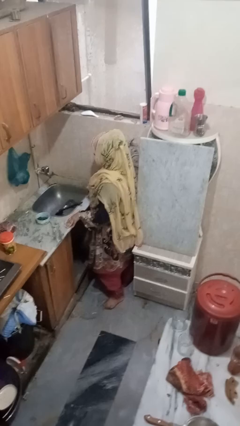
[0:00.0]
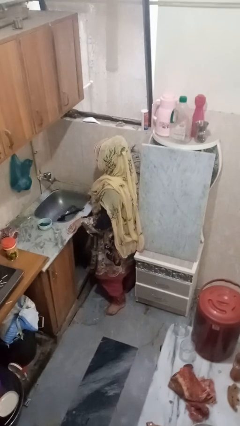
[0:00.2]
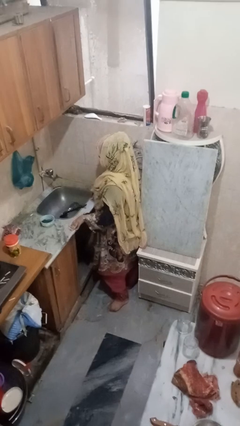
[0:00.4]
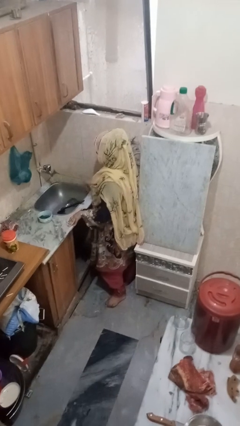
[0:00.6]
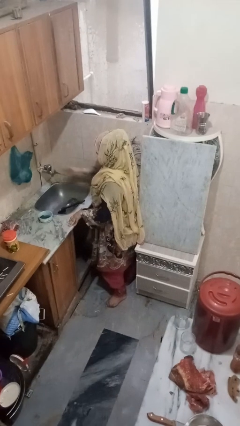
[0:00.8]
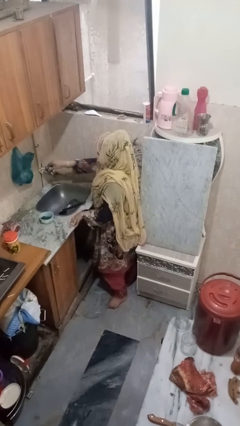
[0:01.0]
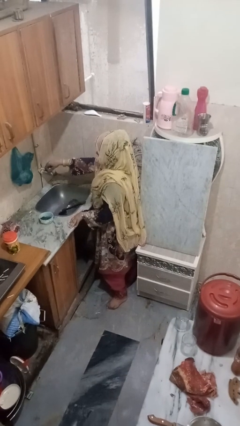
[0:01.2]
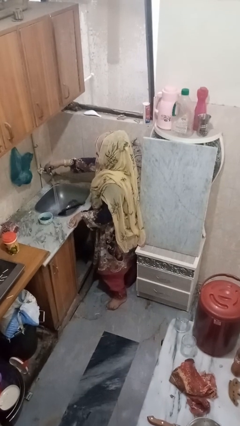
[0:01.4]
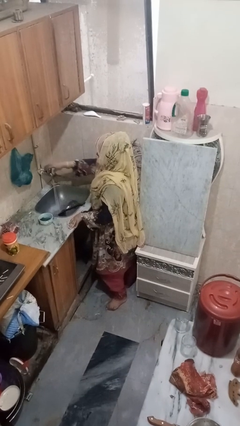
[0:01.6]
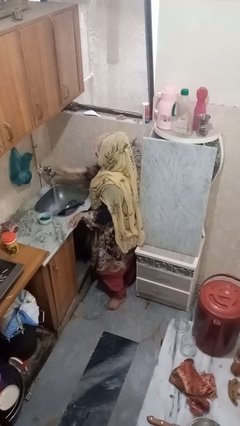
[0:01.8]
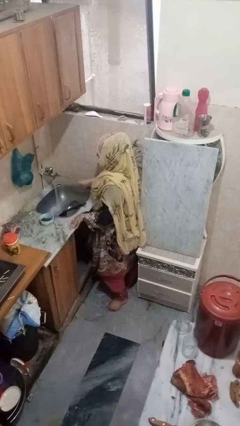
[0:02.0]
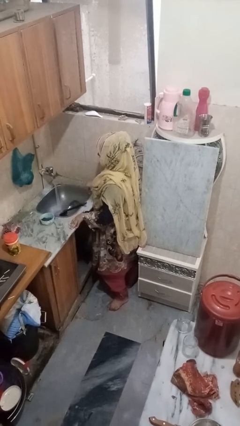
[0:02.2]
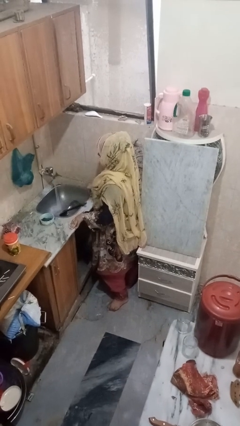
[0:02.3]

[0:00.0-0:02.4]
person turns on faucet

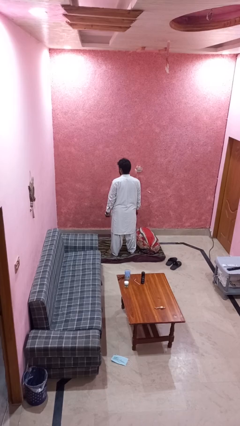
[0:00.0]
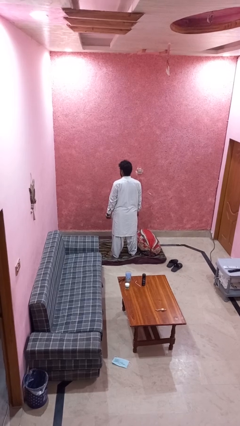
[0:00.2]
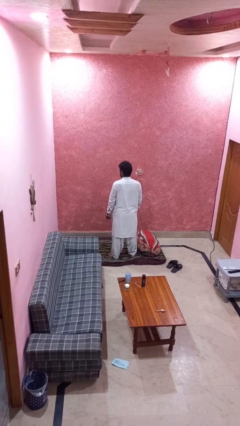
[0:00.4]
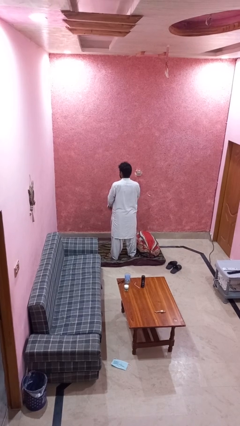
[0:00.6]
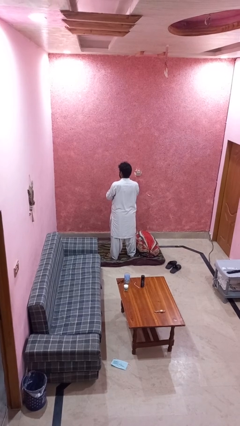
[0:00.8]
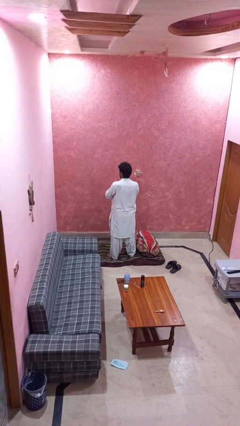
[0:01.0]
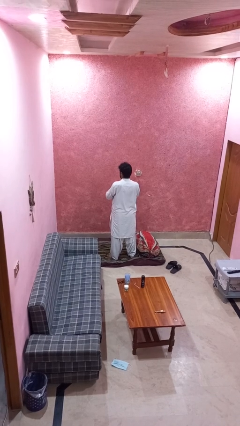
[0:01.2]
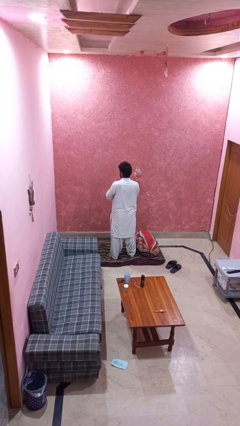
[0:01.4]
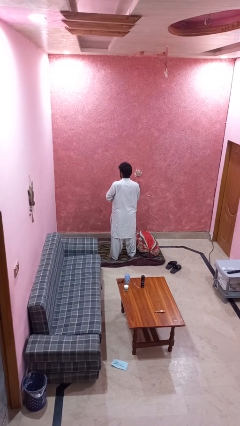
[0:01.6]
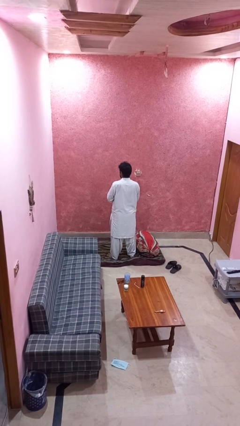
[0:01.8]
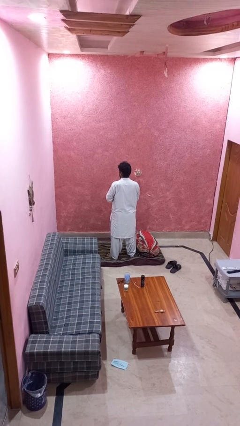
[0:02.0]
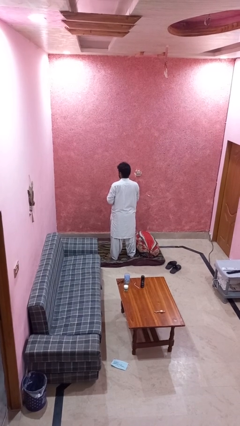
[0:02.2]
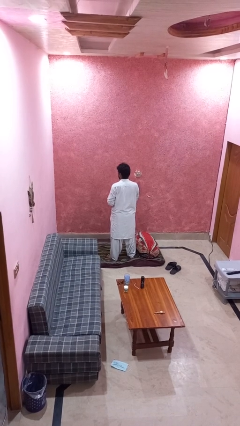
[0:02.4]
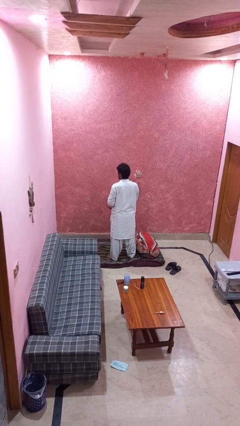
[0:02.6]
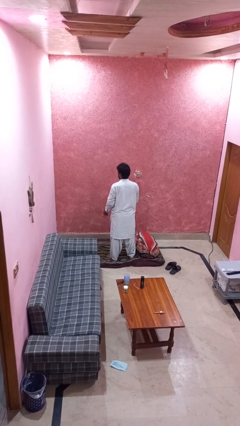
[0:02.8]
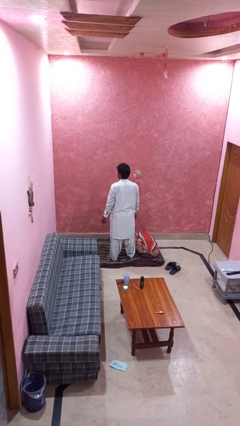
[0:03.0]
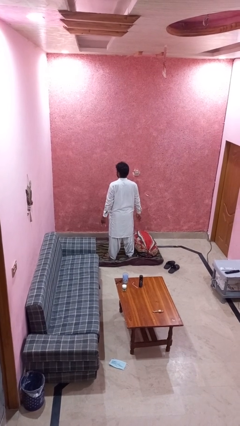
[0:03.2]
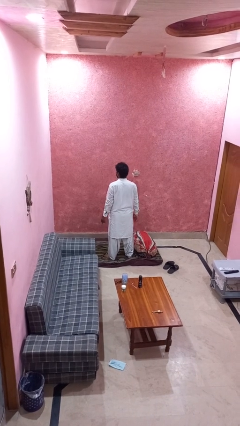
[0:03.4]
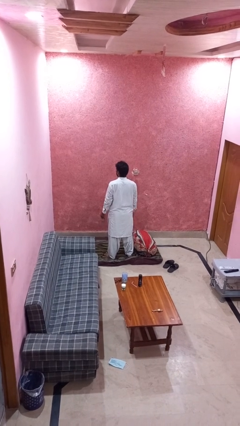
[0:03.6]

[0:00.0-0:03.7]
person takes off wristwatch

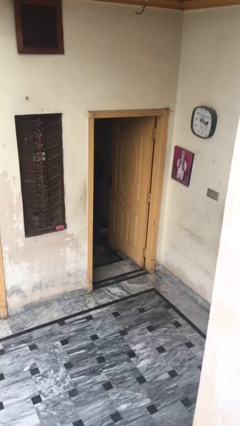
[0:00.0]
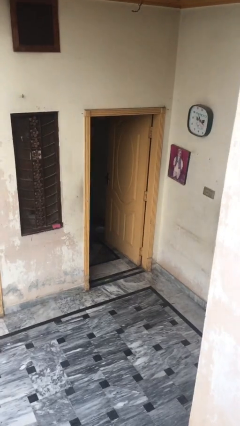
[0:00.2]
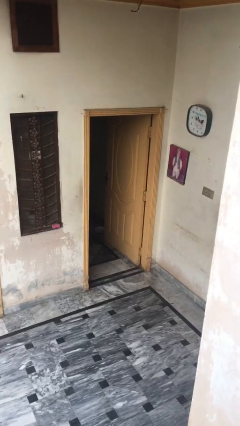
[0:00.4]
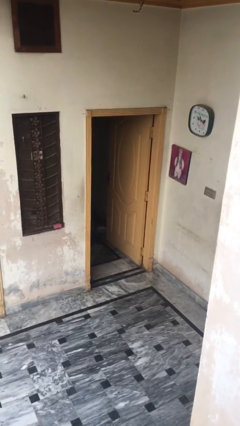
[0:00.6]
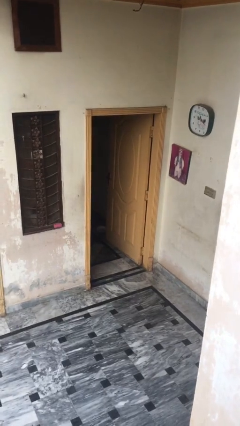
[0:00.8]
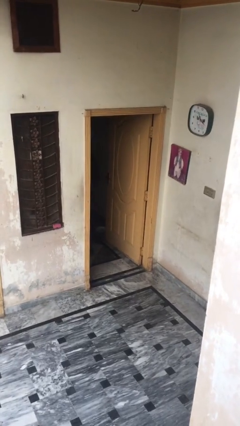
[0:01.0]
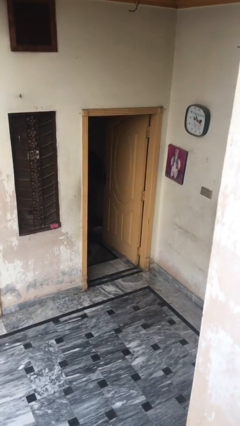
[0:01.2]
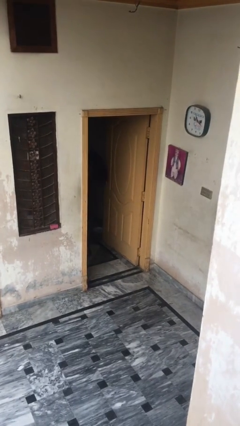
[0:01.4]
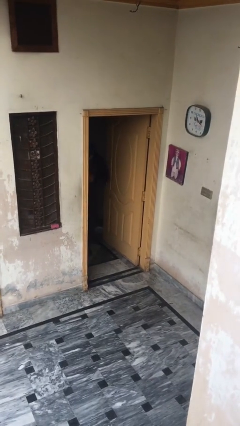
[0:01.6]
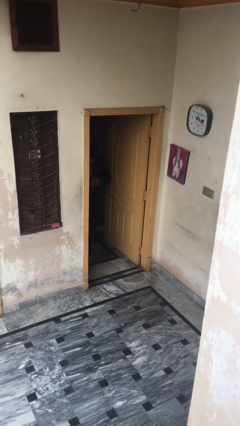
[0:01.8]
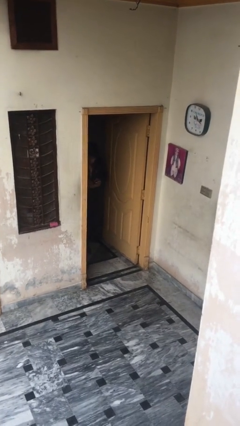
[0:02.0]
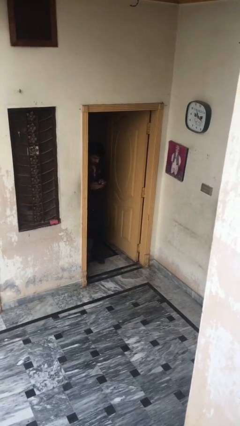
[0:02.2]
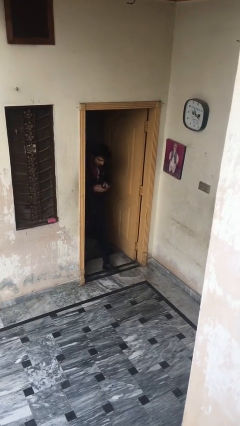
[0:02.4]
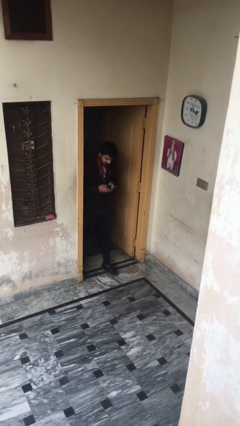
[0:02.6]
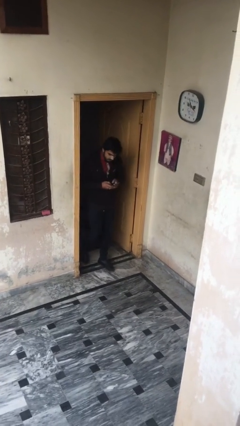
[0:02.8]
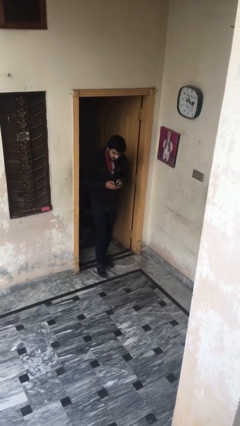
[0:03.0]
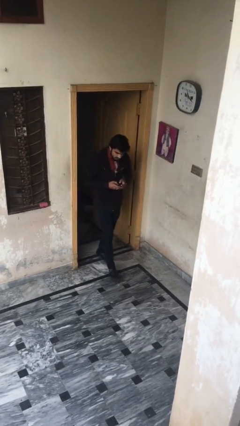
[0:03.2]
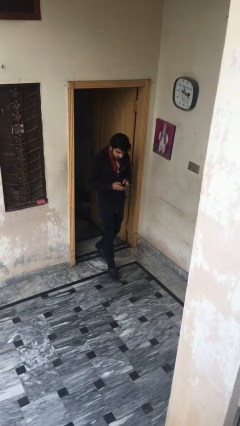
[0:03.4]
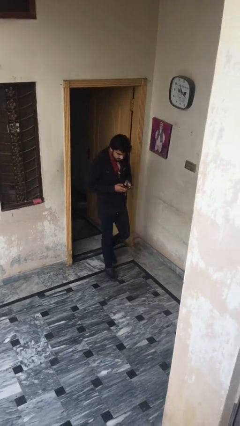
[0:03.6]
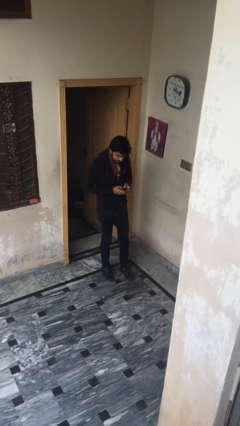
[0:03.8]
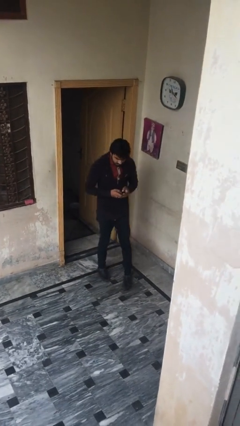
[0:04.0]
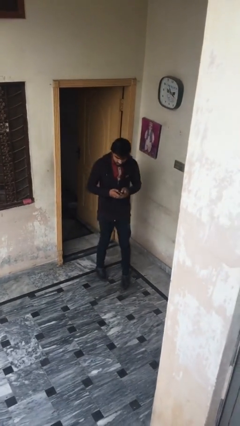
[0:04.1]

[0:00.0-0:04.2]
person enters scene through structure

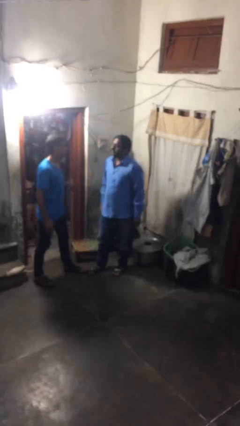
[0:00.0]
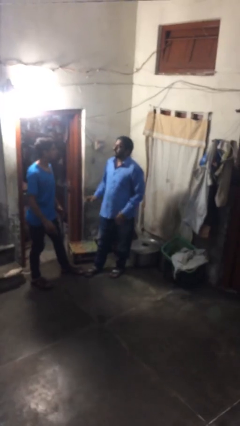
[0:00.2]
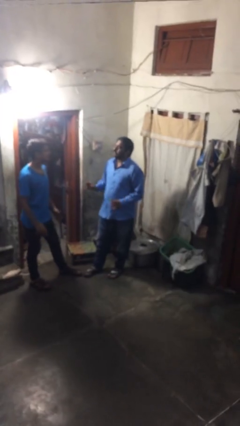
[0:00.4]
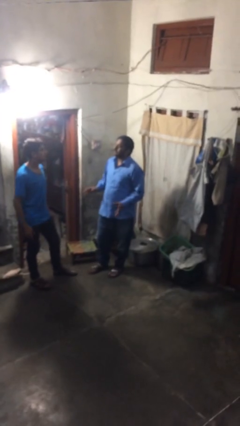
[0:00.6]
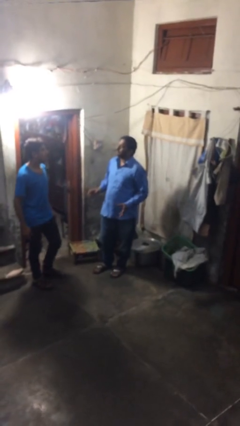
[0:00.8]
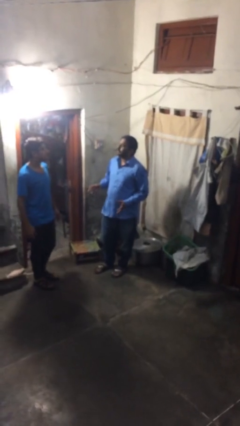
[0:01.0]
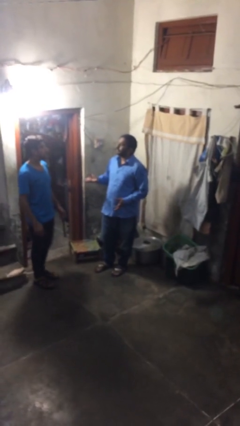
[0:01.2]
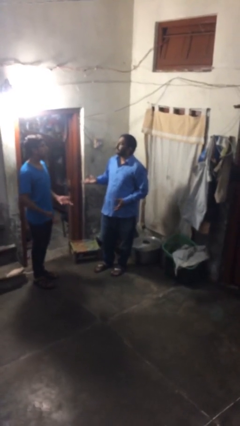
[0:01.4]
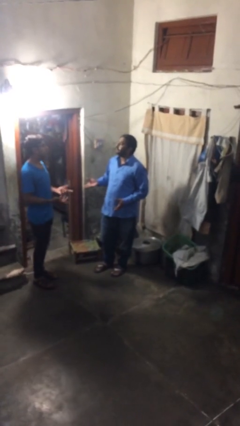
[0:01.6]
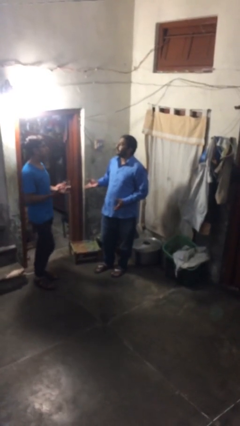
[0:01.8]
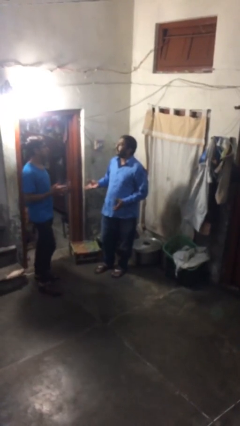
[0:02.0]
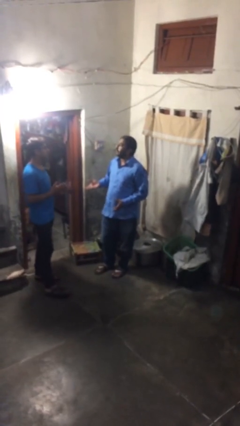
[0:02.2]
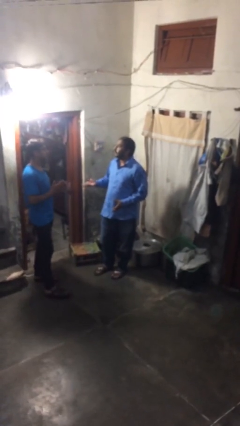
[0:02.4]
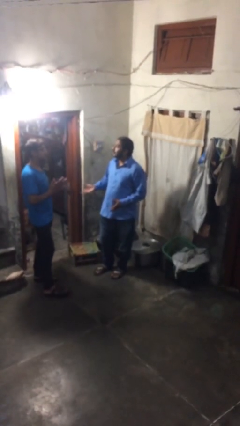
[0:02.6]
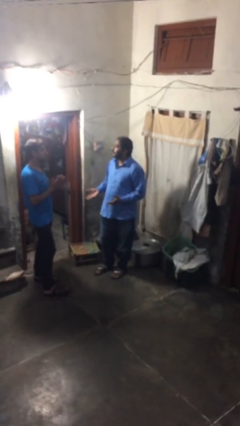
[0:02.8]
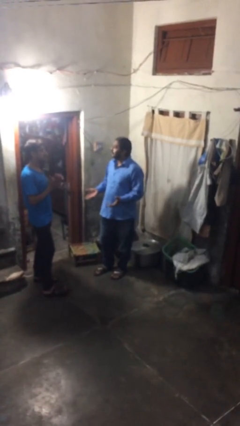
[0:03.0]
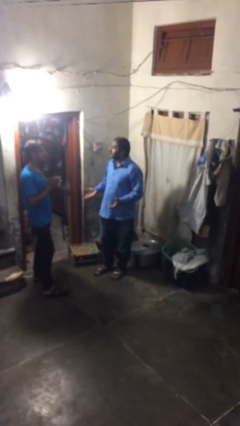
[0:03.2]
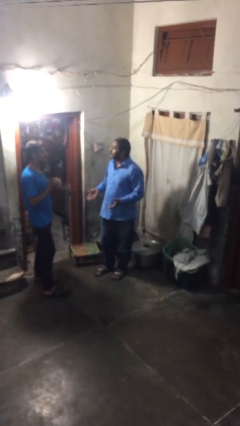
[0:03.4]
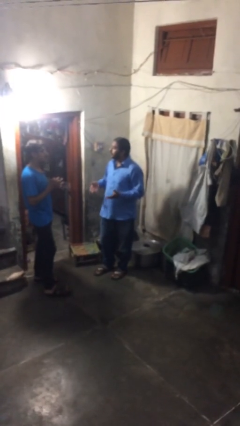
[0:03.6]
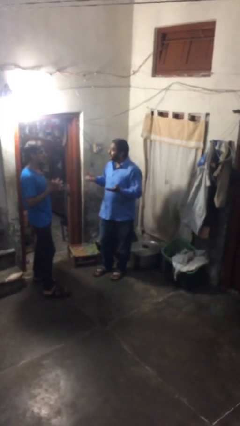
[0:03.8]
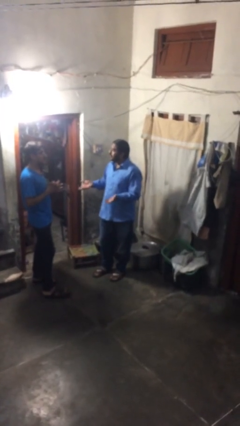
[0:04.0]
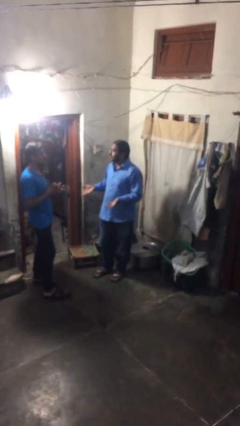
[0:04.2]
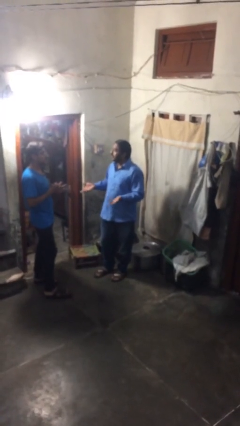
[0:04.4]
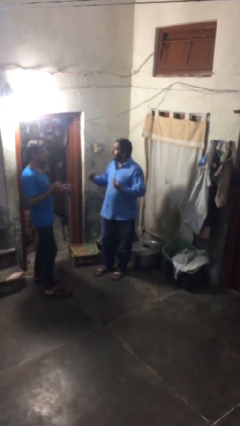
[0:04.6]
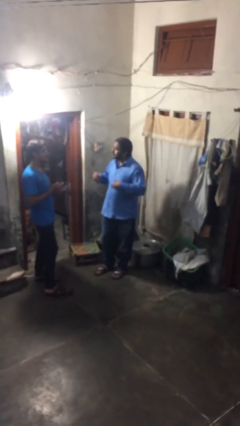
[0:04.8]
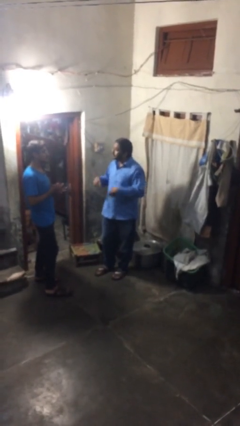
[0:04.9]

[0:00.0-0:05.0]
person talks to person

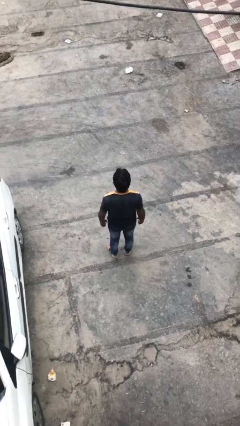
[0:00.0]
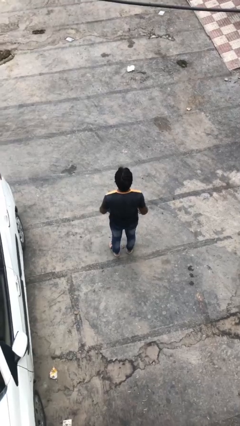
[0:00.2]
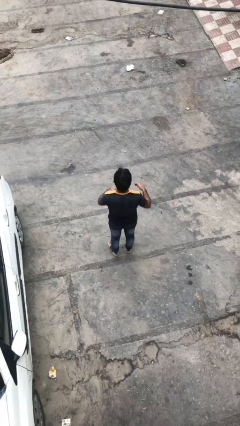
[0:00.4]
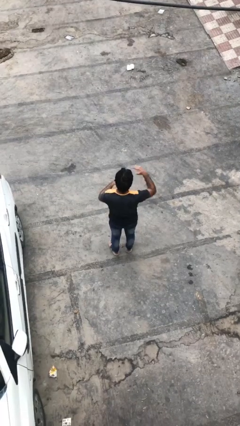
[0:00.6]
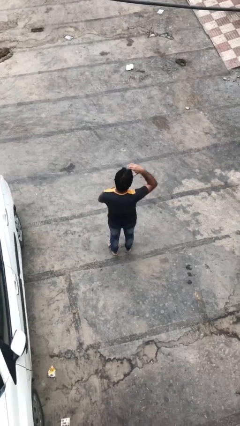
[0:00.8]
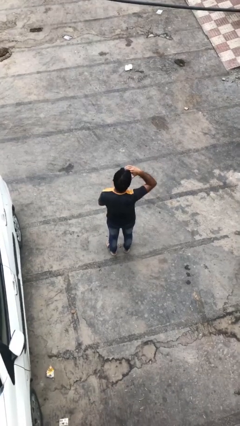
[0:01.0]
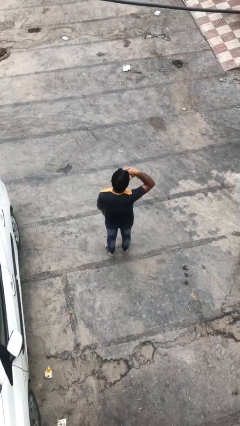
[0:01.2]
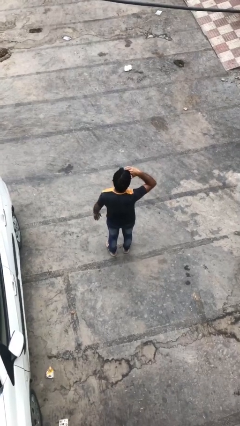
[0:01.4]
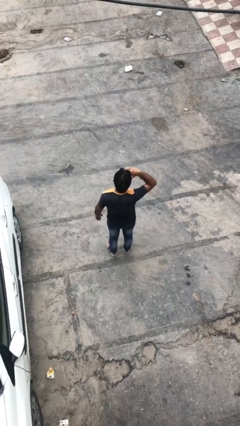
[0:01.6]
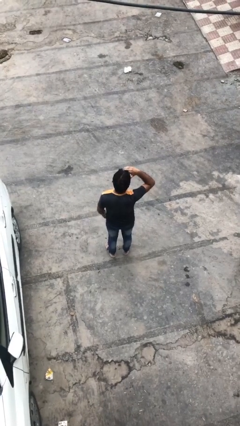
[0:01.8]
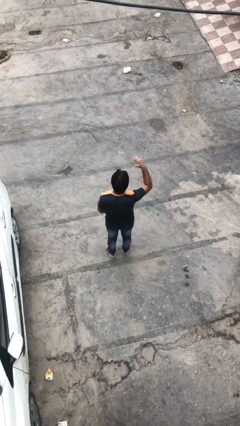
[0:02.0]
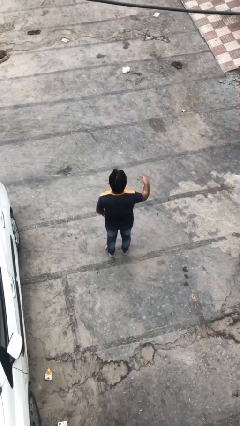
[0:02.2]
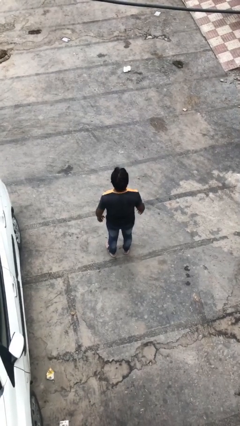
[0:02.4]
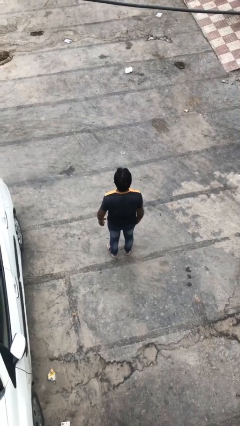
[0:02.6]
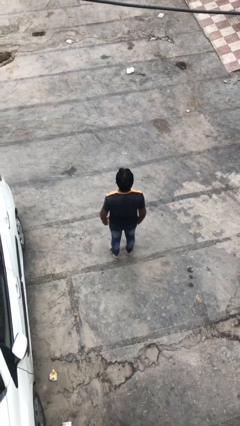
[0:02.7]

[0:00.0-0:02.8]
person shades eyes
